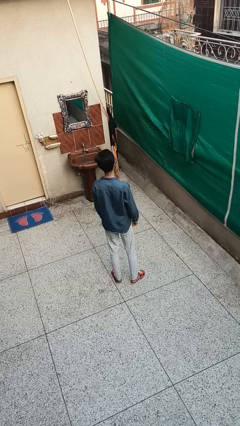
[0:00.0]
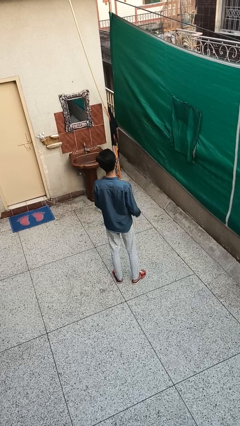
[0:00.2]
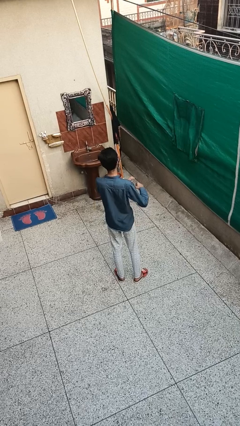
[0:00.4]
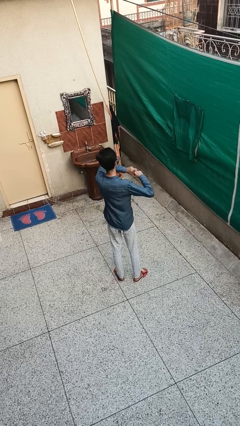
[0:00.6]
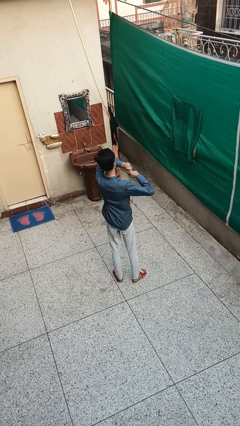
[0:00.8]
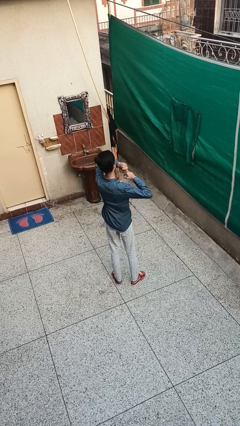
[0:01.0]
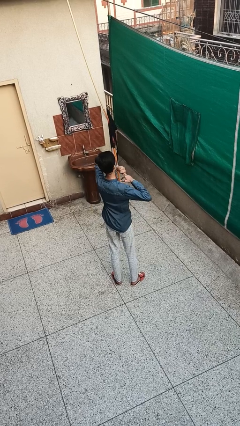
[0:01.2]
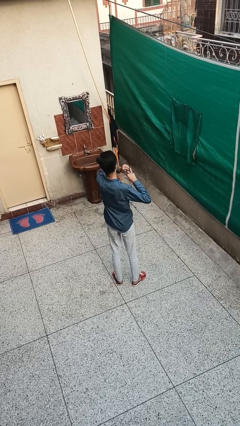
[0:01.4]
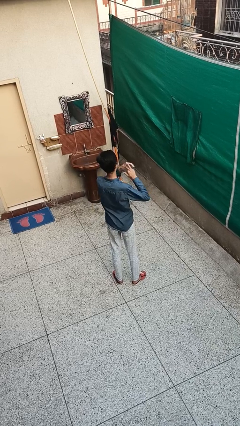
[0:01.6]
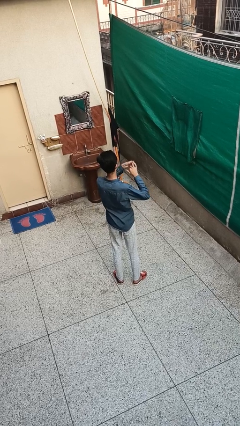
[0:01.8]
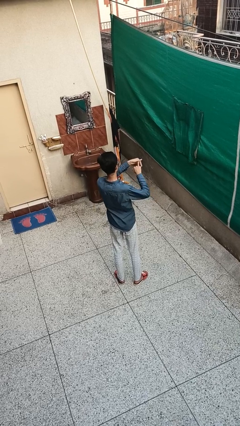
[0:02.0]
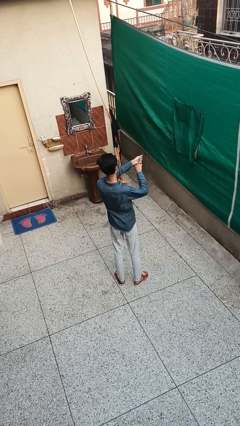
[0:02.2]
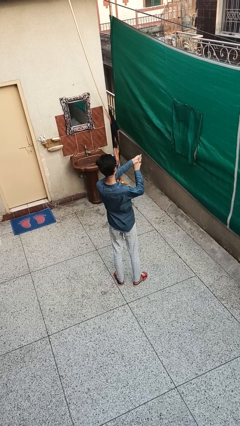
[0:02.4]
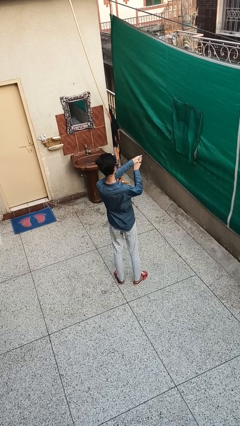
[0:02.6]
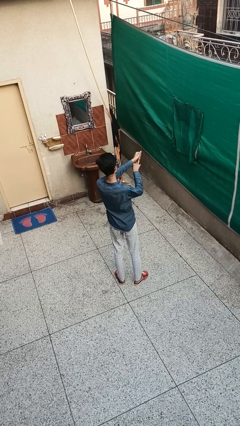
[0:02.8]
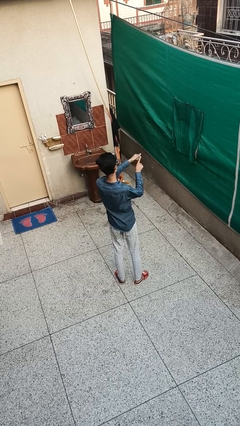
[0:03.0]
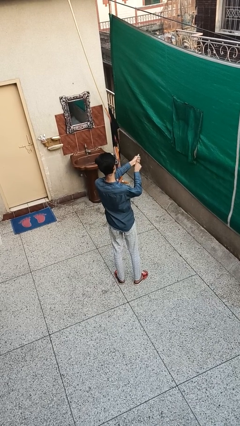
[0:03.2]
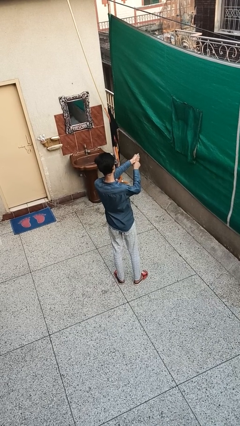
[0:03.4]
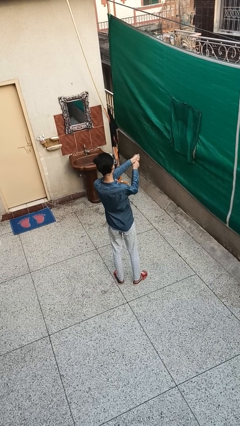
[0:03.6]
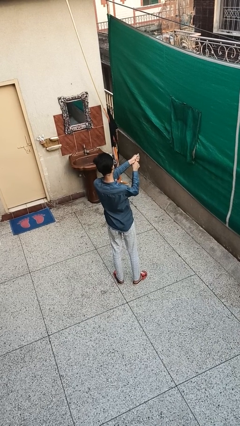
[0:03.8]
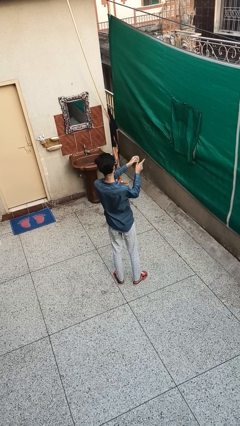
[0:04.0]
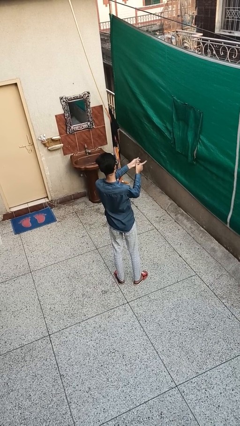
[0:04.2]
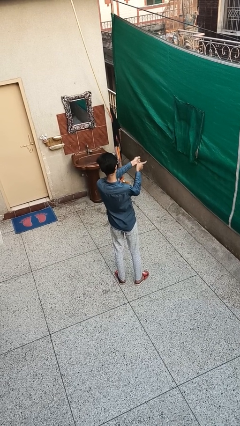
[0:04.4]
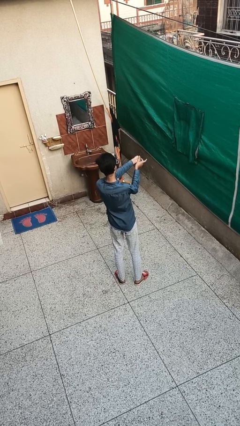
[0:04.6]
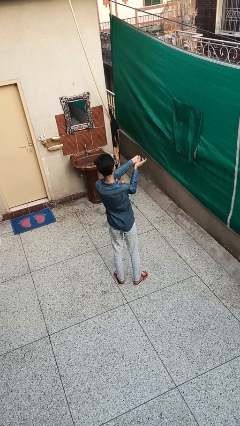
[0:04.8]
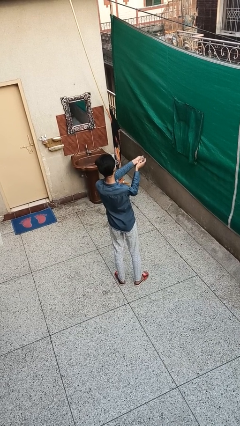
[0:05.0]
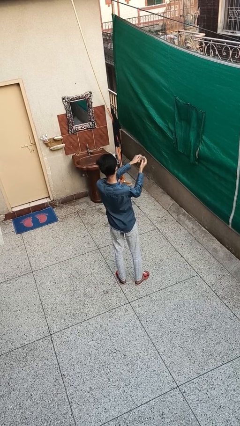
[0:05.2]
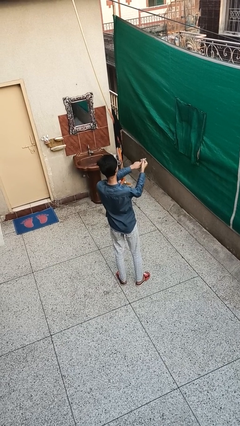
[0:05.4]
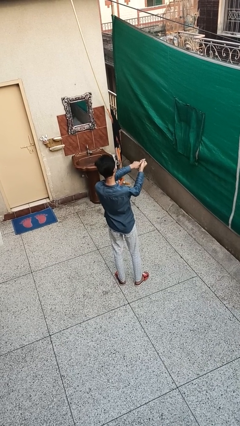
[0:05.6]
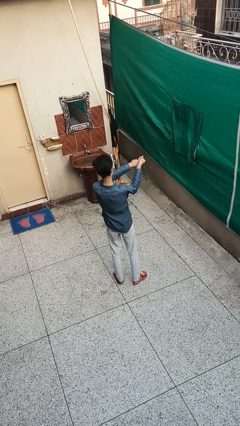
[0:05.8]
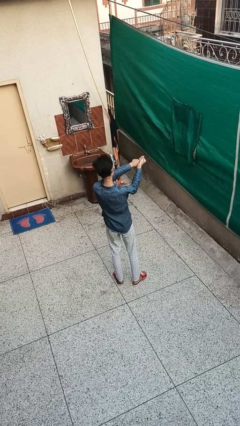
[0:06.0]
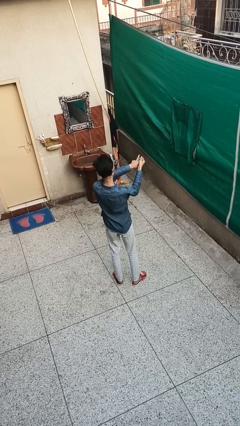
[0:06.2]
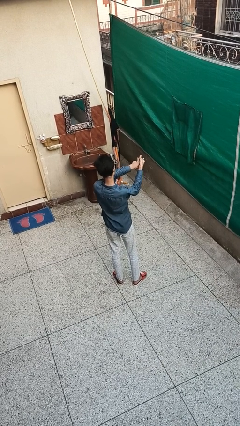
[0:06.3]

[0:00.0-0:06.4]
person cracks knuckles

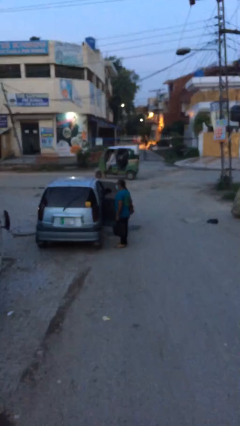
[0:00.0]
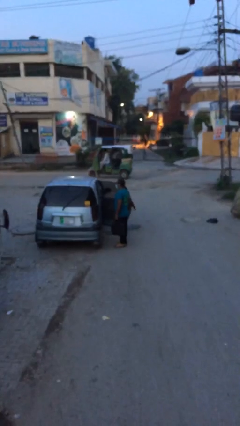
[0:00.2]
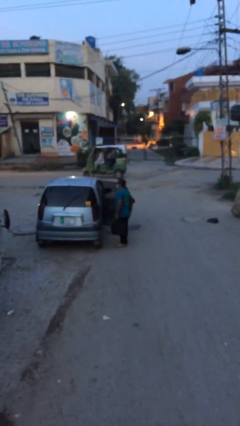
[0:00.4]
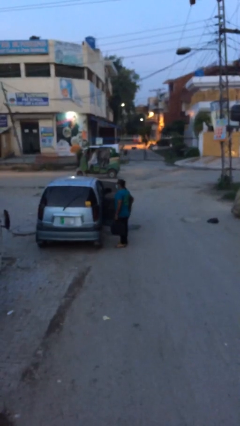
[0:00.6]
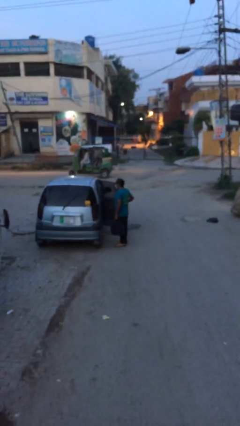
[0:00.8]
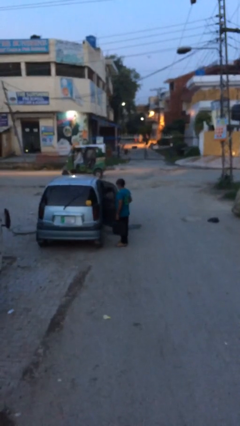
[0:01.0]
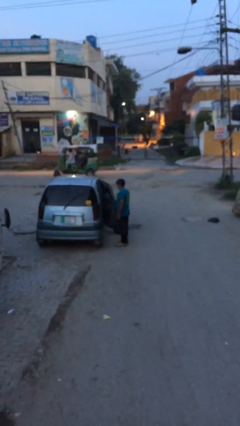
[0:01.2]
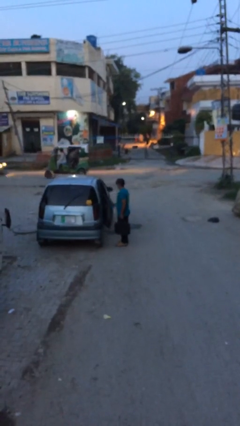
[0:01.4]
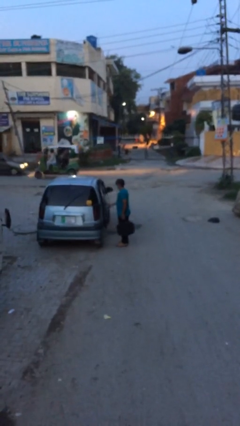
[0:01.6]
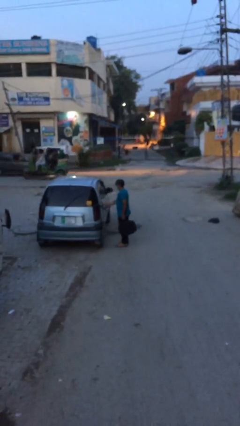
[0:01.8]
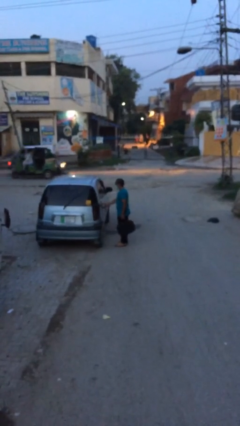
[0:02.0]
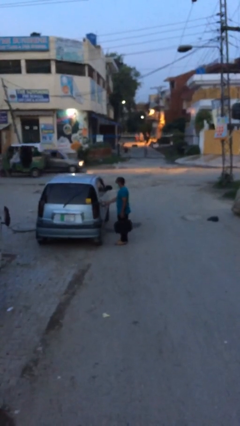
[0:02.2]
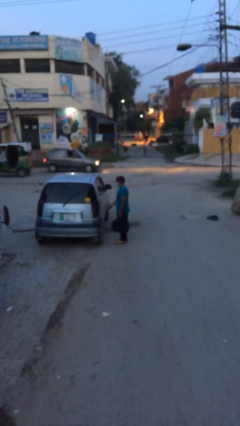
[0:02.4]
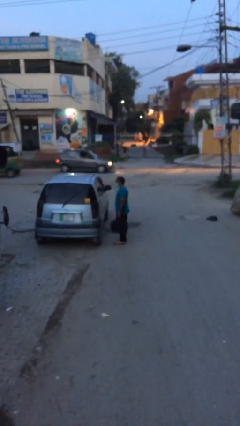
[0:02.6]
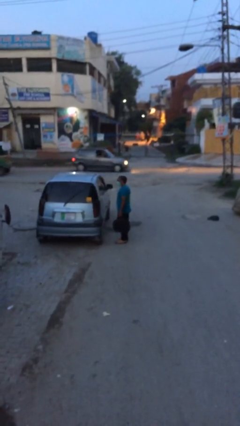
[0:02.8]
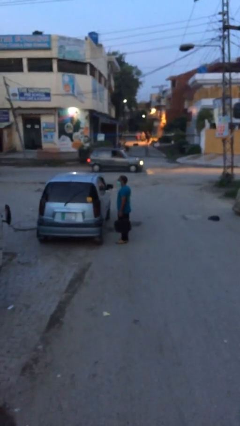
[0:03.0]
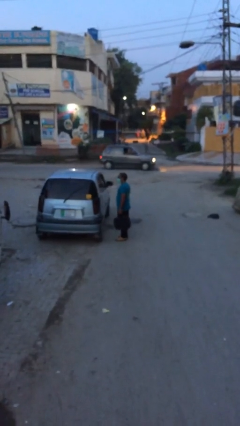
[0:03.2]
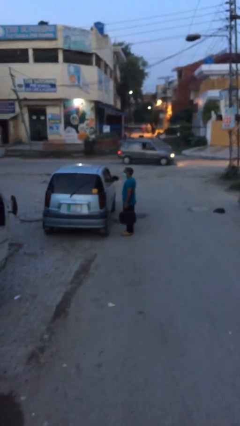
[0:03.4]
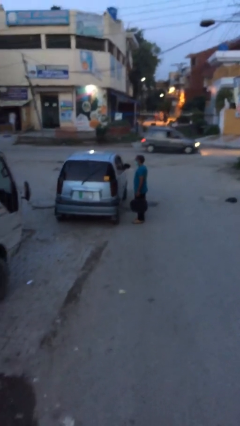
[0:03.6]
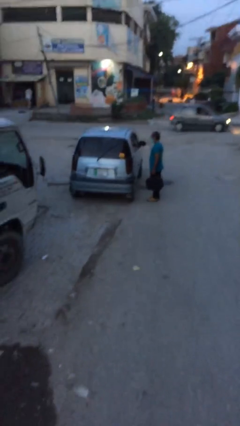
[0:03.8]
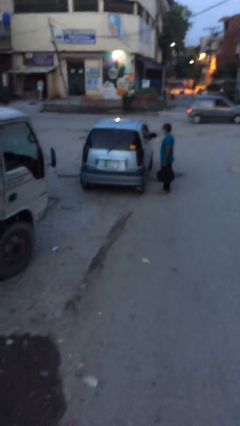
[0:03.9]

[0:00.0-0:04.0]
person closes car door

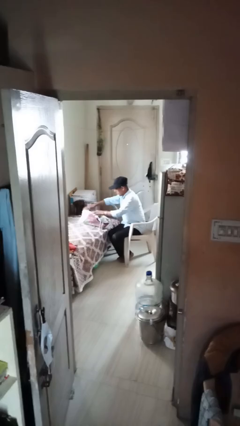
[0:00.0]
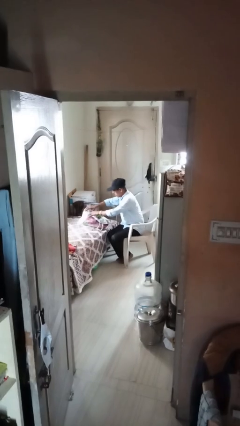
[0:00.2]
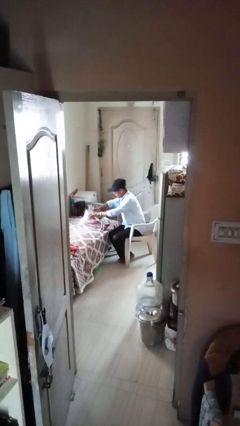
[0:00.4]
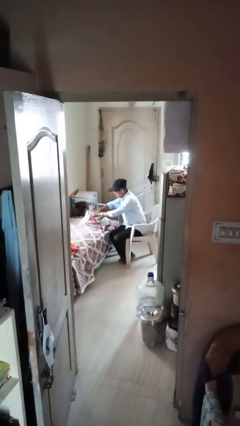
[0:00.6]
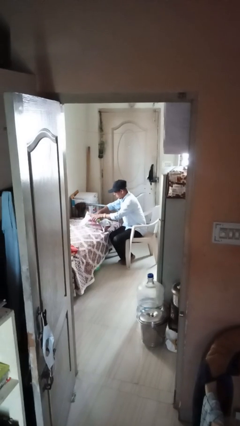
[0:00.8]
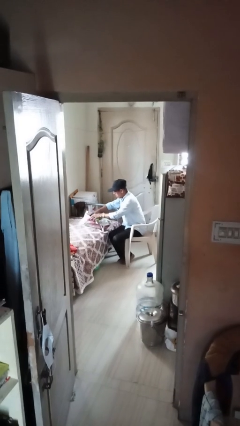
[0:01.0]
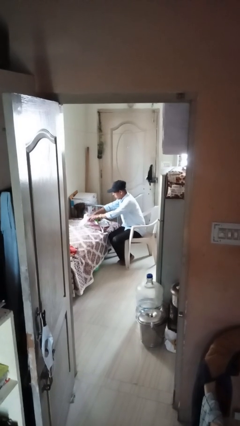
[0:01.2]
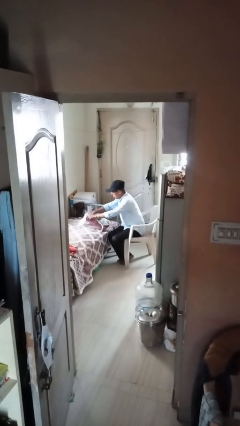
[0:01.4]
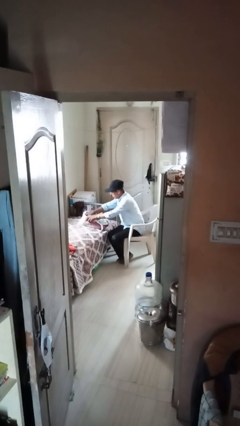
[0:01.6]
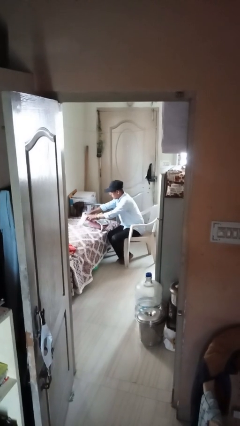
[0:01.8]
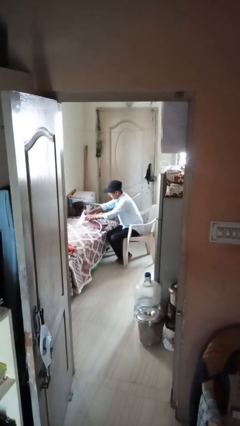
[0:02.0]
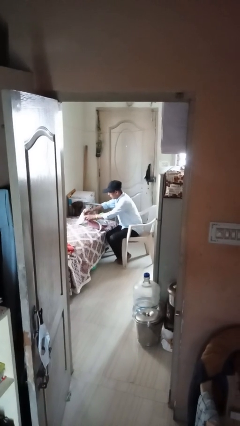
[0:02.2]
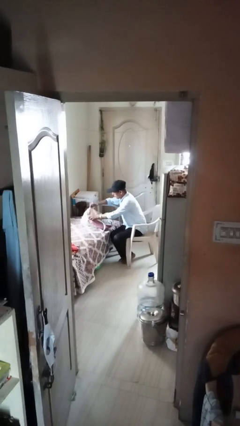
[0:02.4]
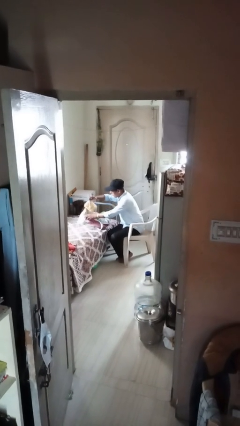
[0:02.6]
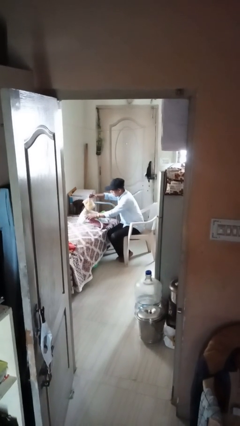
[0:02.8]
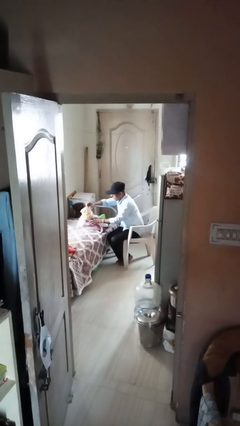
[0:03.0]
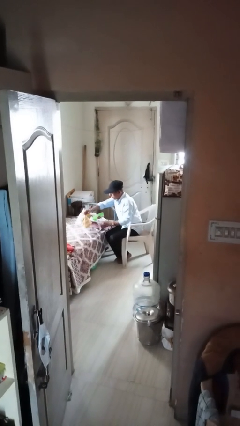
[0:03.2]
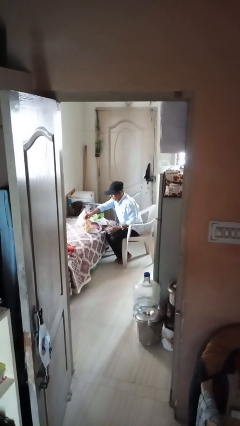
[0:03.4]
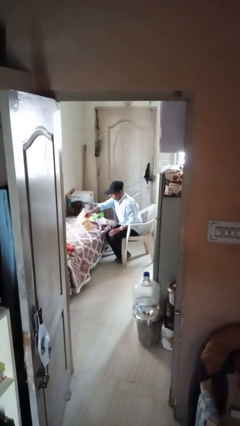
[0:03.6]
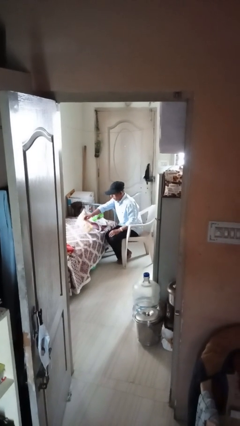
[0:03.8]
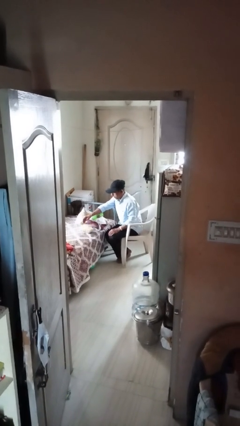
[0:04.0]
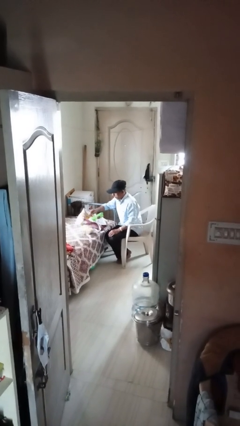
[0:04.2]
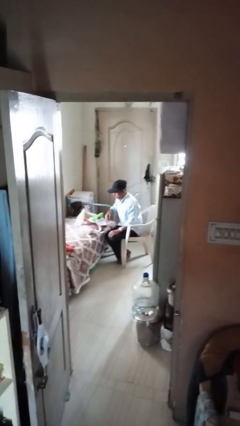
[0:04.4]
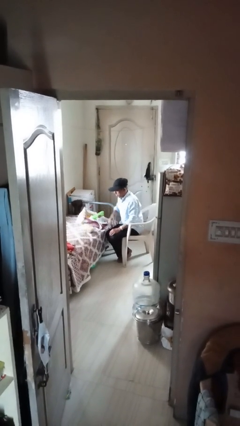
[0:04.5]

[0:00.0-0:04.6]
person takes object from bag

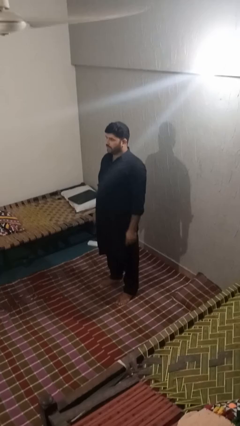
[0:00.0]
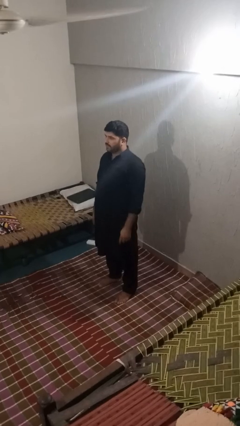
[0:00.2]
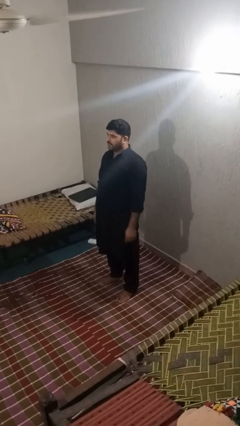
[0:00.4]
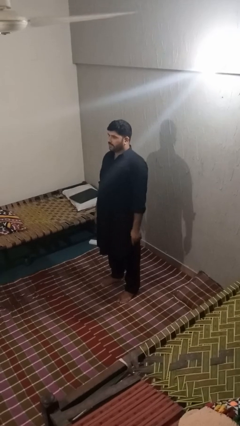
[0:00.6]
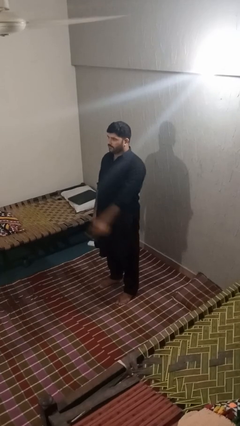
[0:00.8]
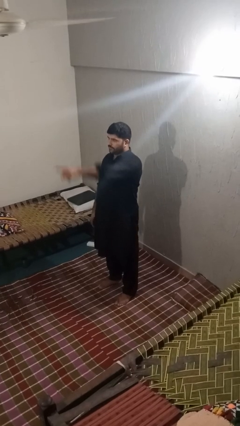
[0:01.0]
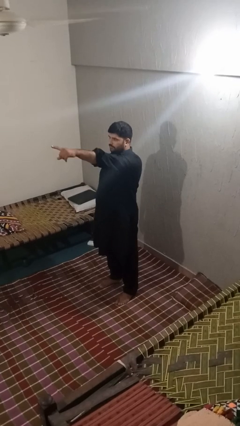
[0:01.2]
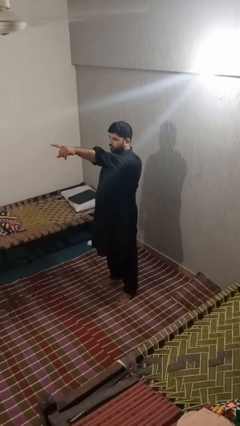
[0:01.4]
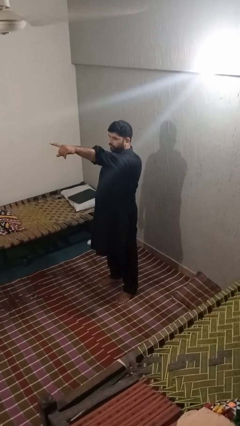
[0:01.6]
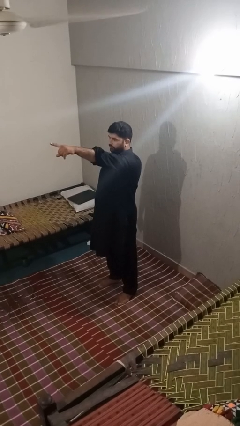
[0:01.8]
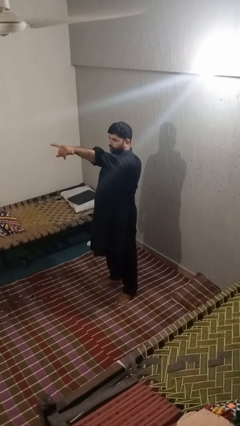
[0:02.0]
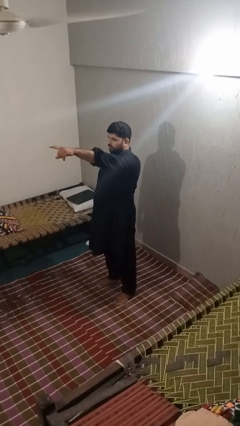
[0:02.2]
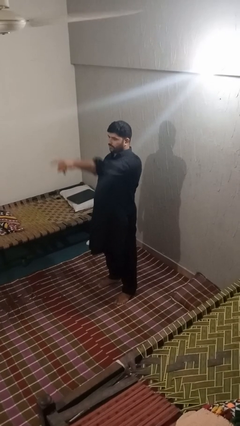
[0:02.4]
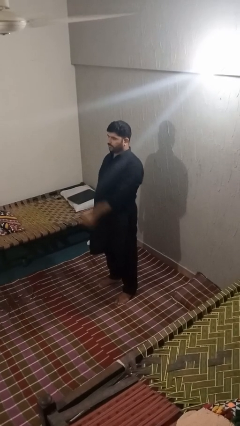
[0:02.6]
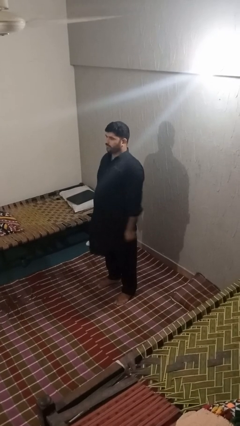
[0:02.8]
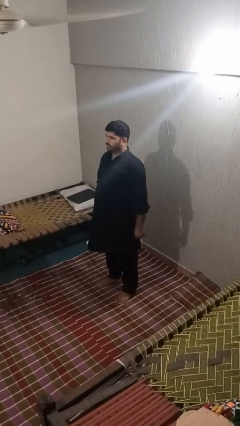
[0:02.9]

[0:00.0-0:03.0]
person points at person
